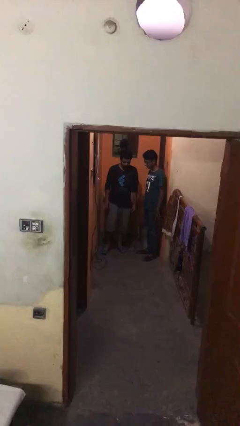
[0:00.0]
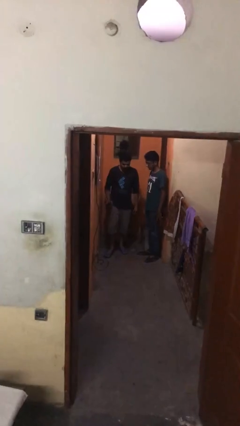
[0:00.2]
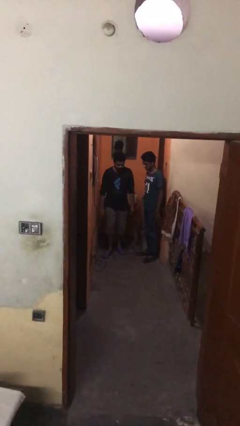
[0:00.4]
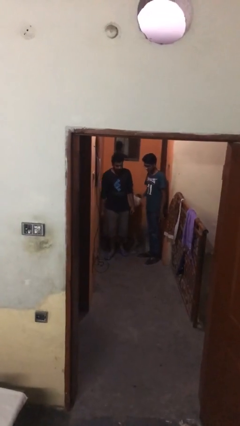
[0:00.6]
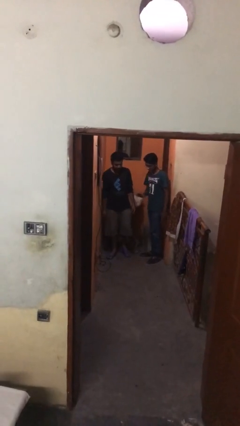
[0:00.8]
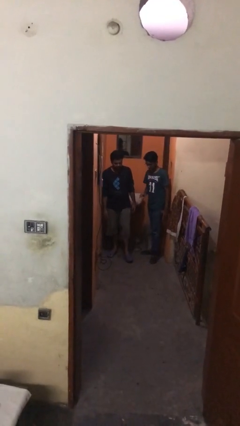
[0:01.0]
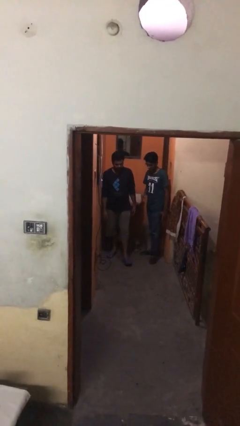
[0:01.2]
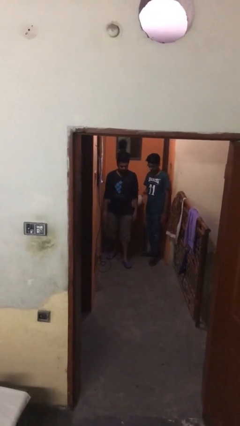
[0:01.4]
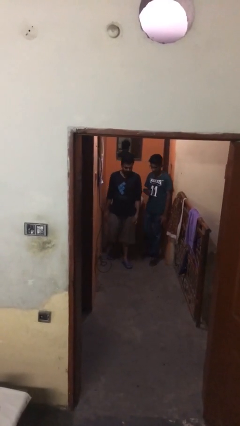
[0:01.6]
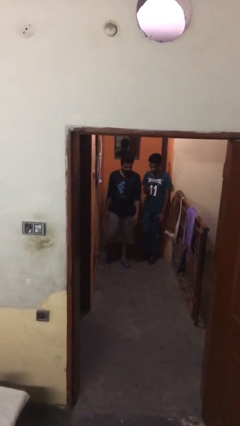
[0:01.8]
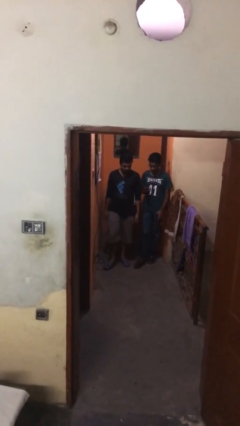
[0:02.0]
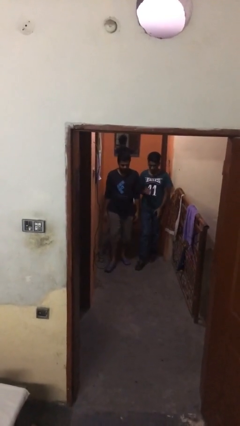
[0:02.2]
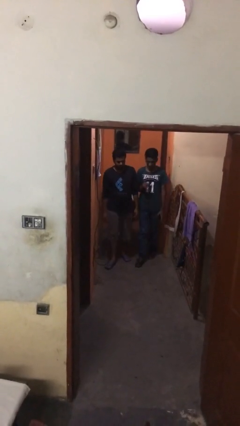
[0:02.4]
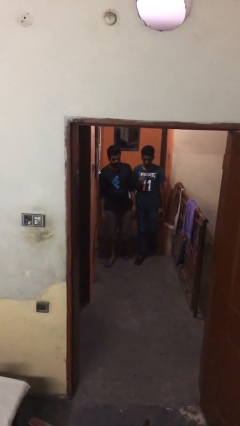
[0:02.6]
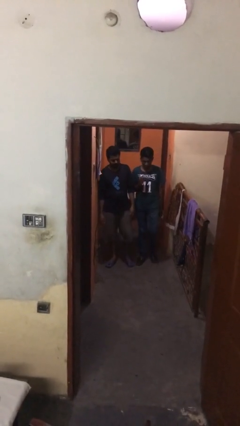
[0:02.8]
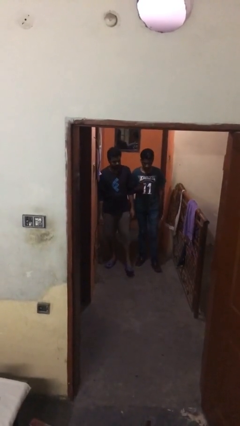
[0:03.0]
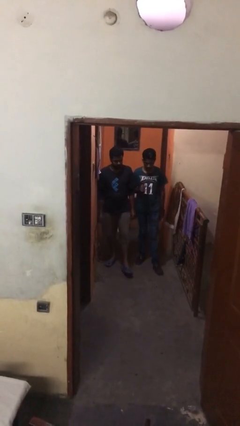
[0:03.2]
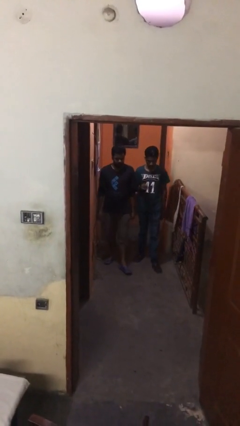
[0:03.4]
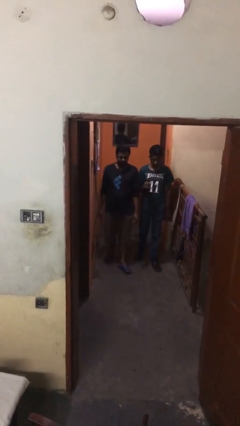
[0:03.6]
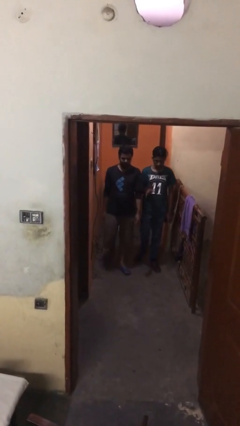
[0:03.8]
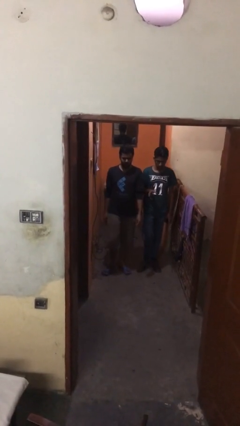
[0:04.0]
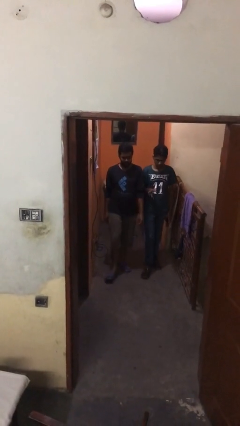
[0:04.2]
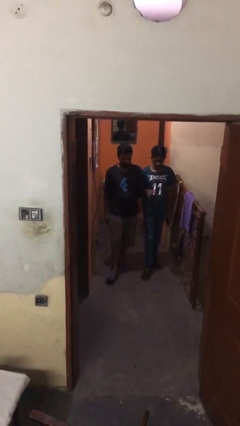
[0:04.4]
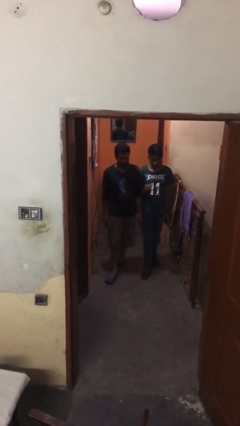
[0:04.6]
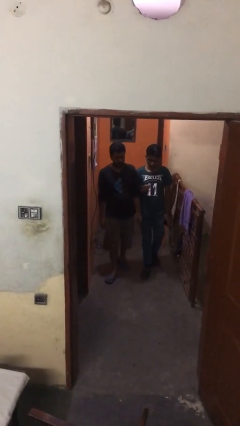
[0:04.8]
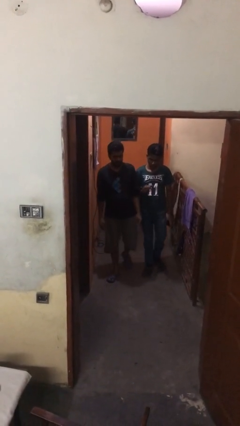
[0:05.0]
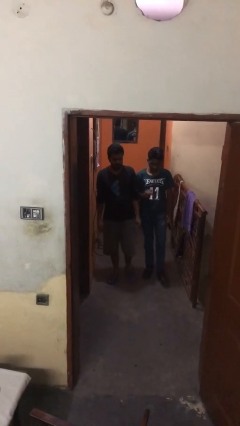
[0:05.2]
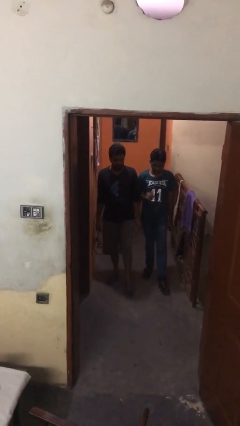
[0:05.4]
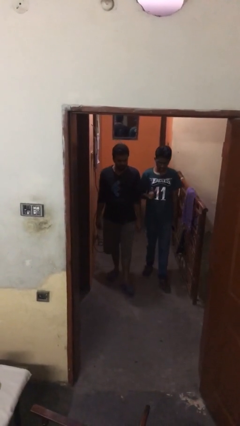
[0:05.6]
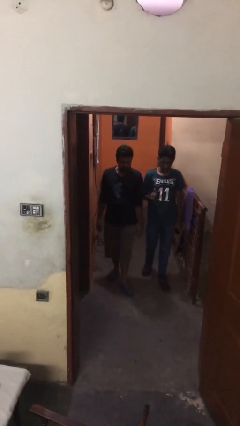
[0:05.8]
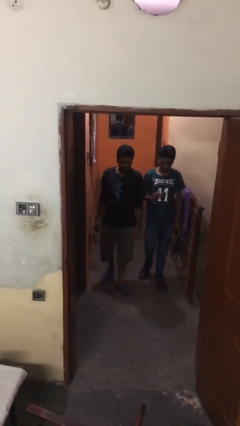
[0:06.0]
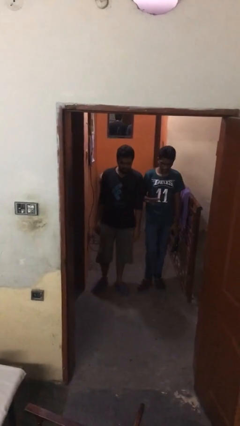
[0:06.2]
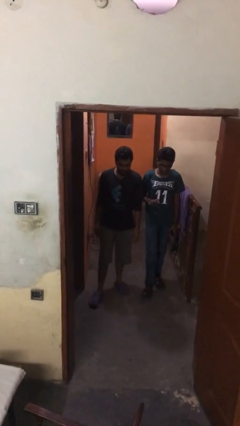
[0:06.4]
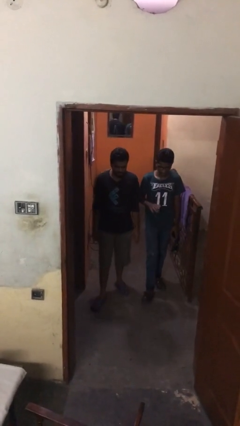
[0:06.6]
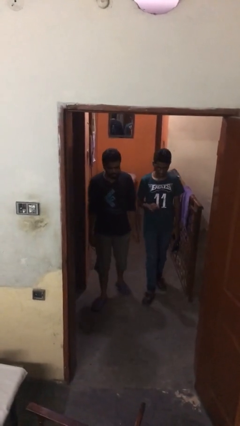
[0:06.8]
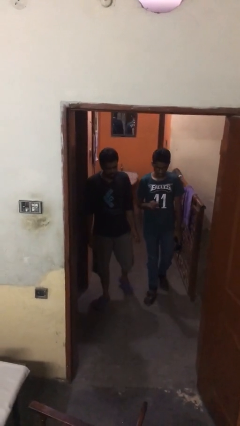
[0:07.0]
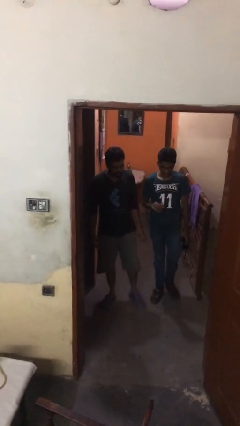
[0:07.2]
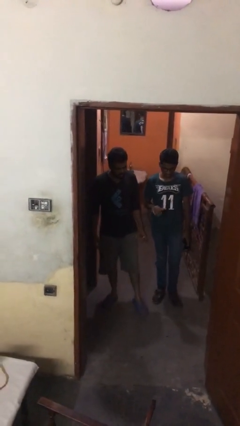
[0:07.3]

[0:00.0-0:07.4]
person talks to person

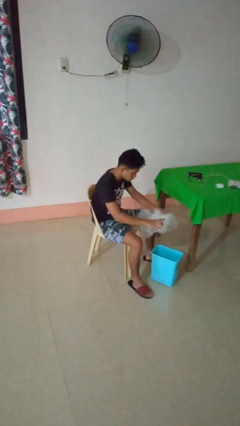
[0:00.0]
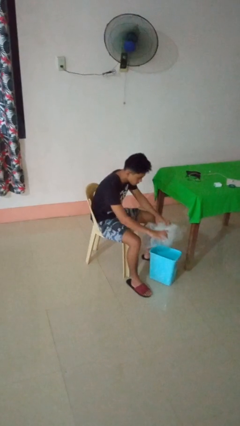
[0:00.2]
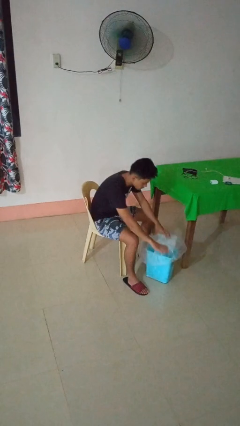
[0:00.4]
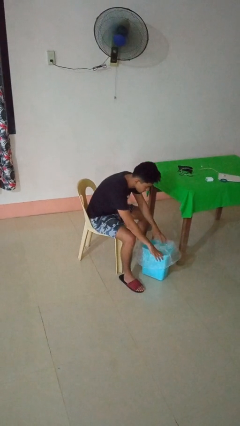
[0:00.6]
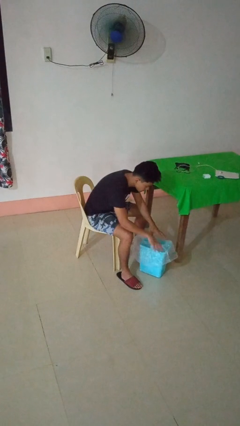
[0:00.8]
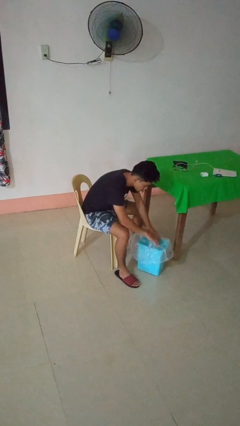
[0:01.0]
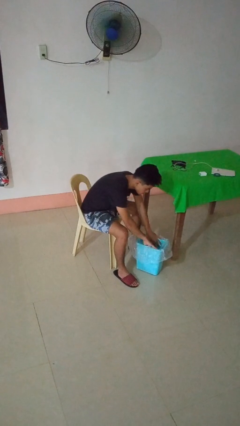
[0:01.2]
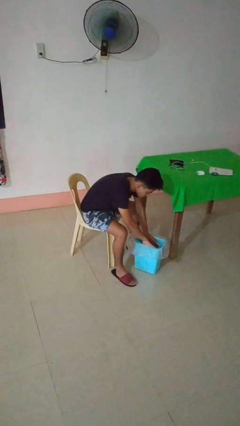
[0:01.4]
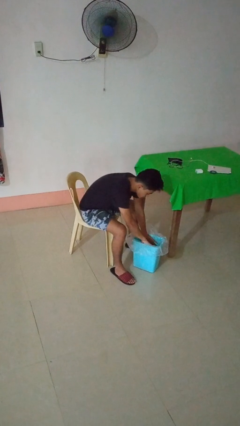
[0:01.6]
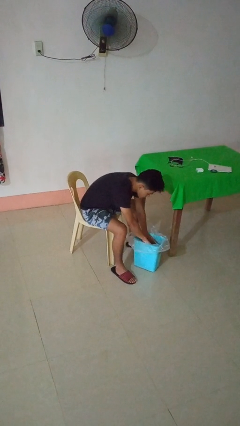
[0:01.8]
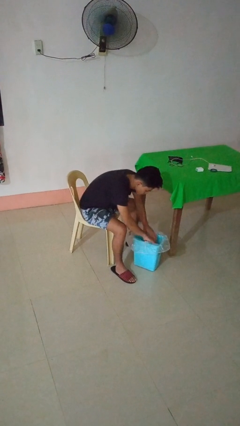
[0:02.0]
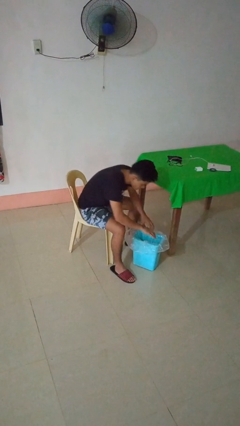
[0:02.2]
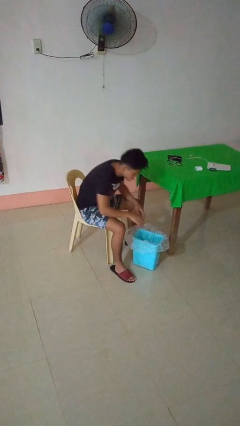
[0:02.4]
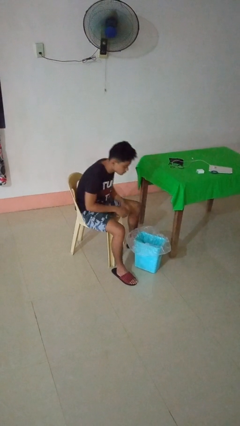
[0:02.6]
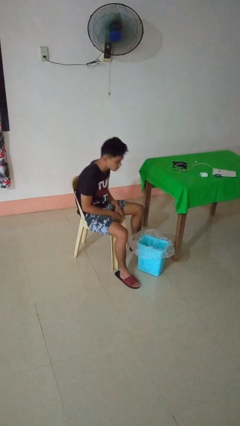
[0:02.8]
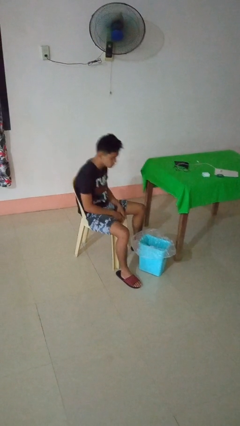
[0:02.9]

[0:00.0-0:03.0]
person inserts trashbag into trashcan

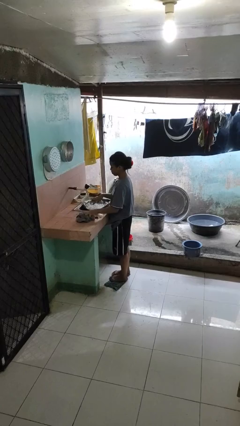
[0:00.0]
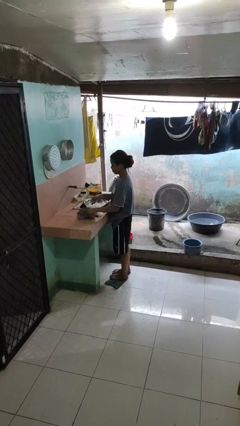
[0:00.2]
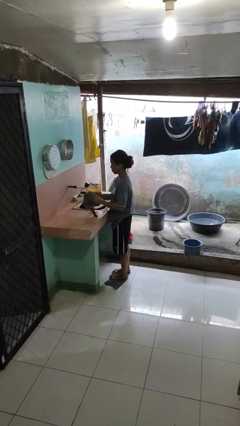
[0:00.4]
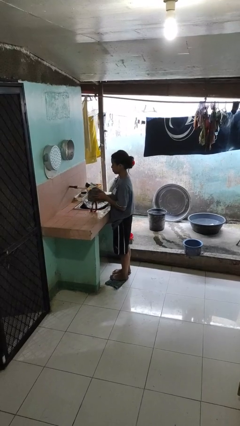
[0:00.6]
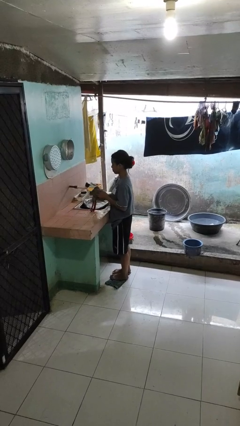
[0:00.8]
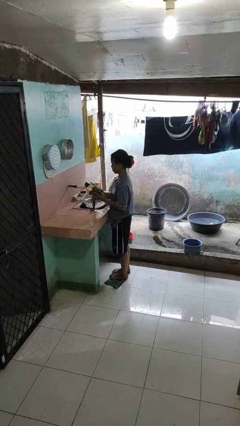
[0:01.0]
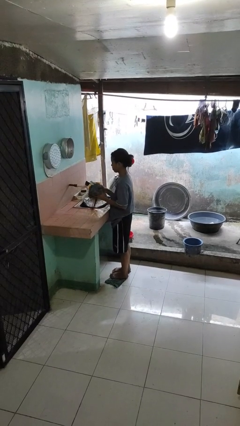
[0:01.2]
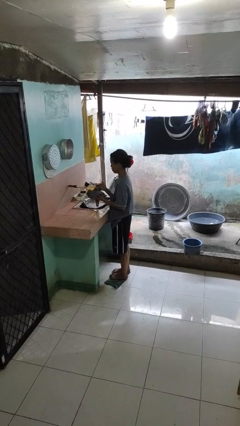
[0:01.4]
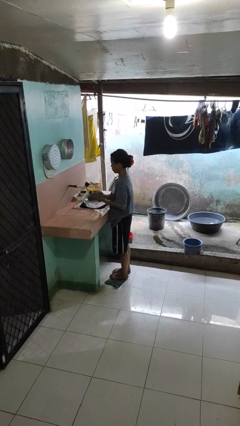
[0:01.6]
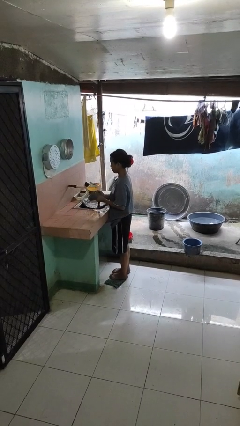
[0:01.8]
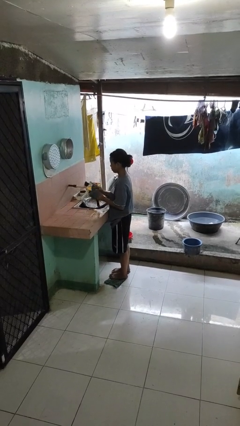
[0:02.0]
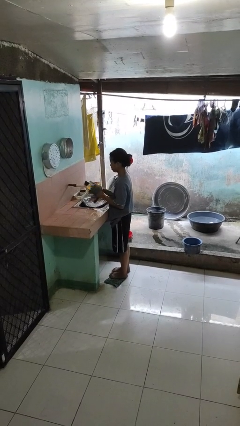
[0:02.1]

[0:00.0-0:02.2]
person dries hands with towel

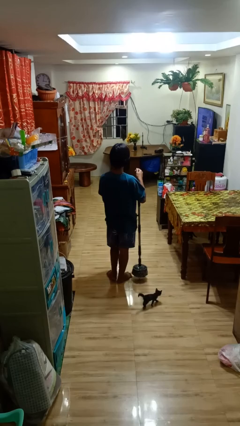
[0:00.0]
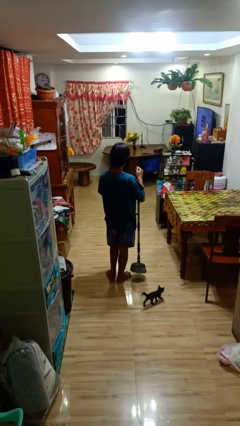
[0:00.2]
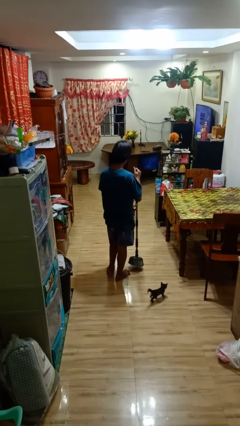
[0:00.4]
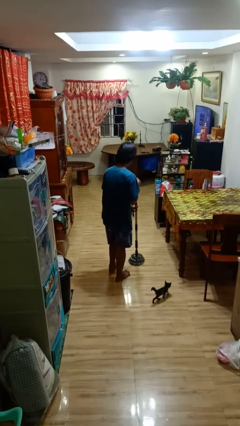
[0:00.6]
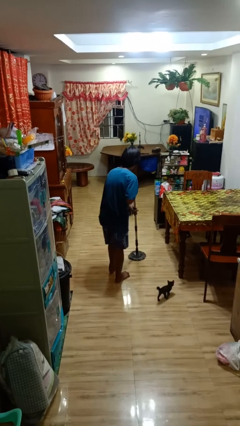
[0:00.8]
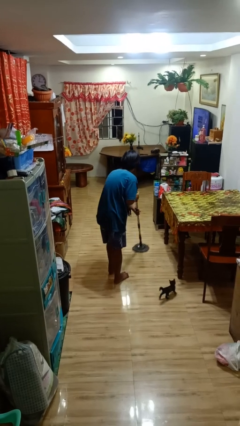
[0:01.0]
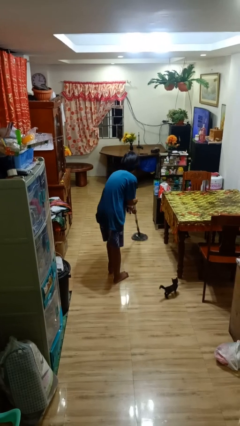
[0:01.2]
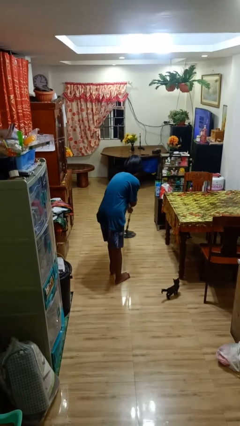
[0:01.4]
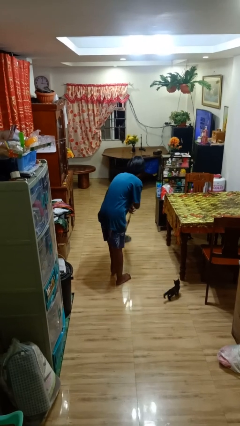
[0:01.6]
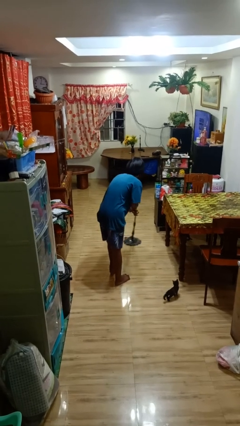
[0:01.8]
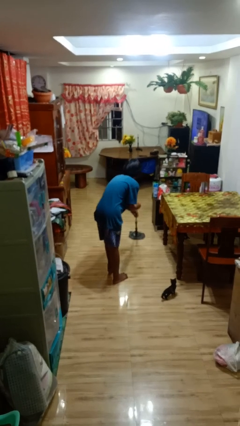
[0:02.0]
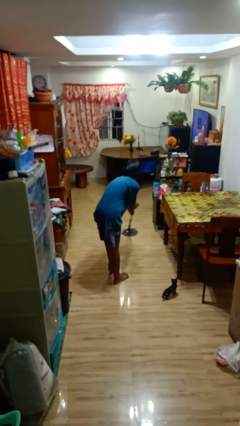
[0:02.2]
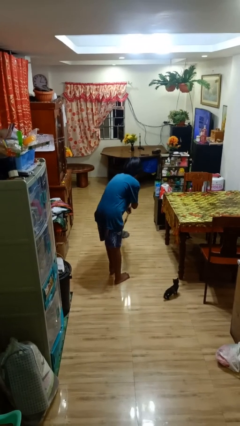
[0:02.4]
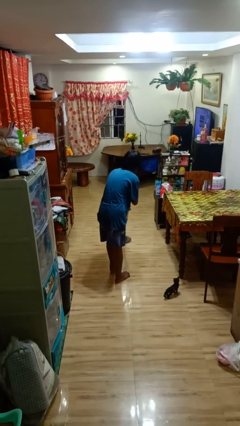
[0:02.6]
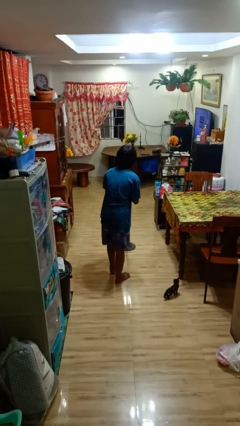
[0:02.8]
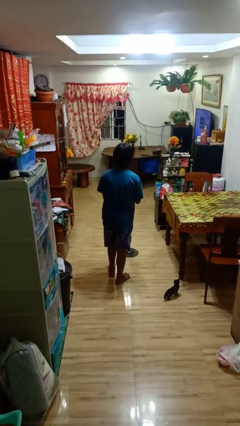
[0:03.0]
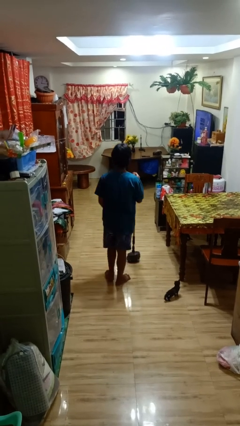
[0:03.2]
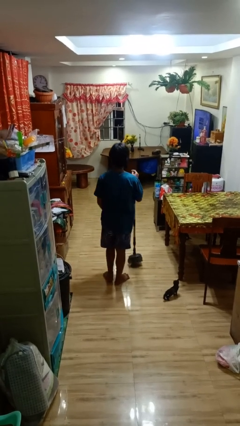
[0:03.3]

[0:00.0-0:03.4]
person mops

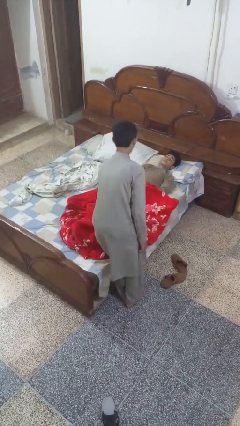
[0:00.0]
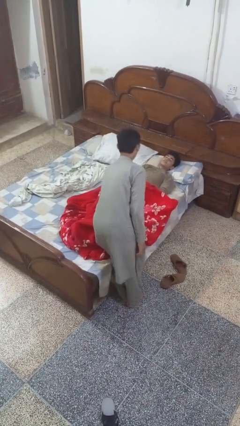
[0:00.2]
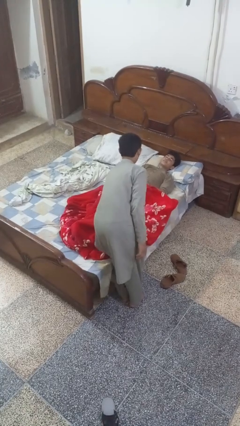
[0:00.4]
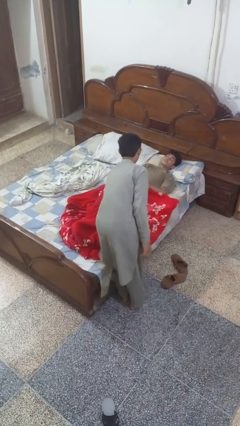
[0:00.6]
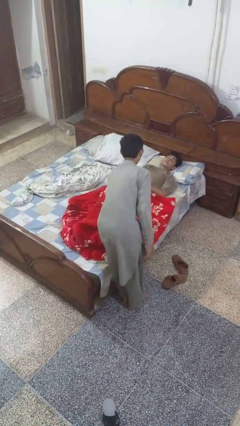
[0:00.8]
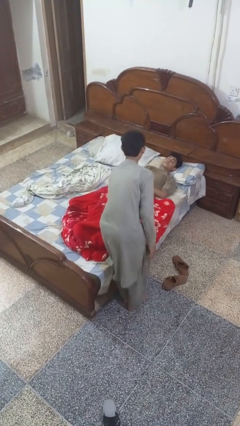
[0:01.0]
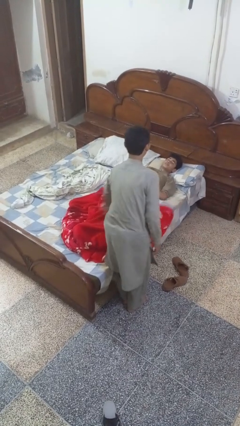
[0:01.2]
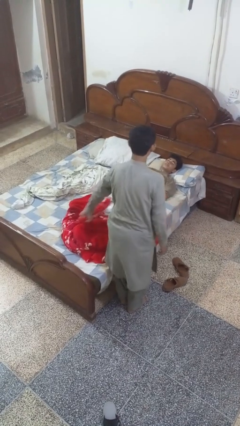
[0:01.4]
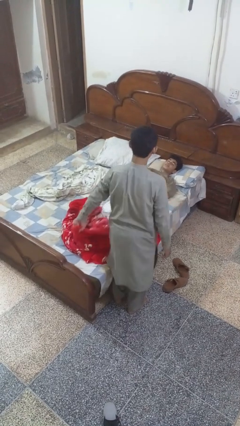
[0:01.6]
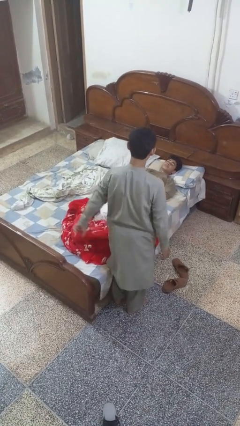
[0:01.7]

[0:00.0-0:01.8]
person uncovers friend with blanket

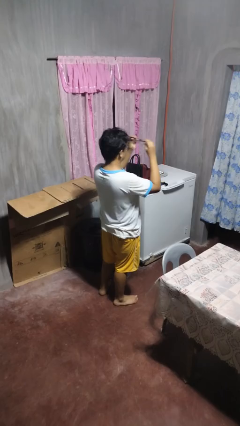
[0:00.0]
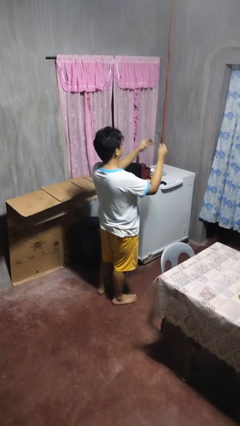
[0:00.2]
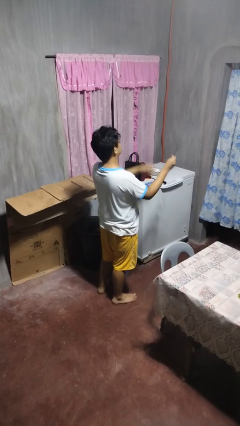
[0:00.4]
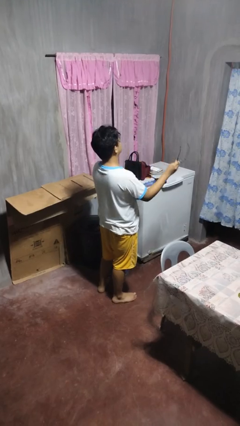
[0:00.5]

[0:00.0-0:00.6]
person takes off glasses
